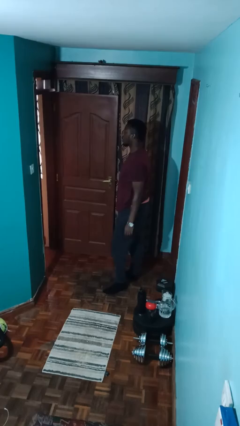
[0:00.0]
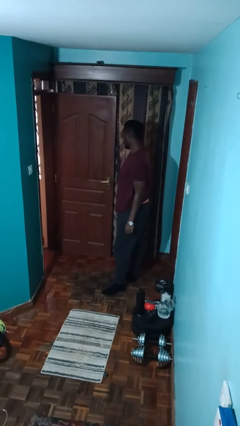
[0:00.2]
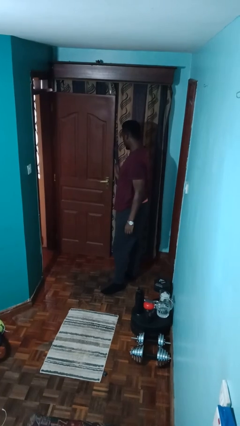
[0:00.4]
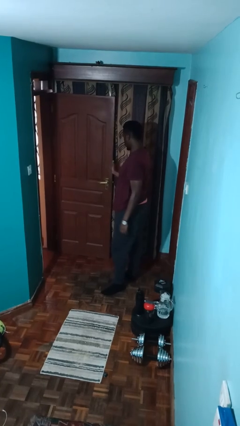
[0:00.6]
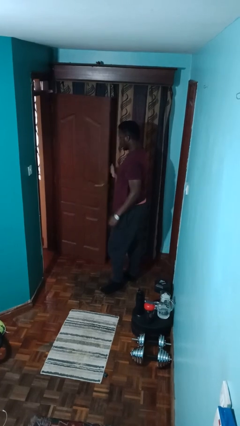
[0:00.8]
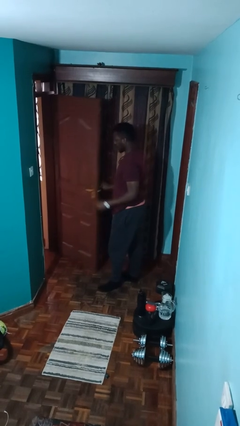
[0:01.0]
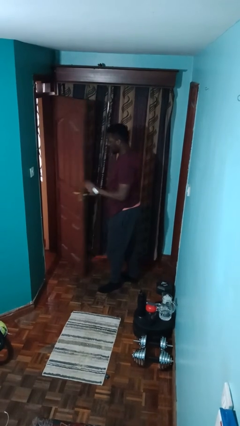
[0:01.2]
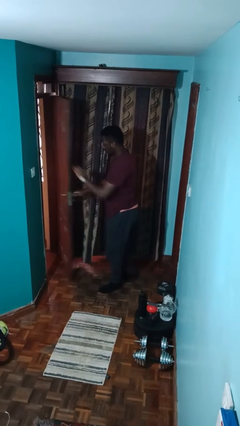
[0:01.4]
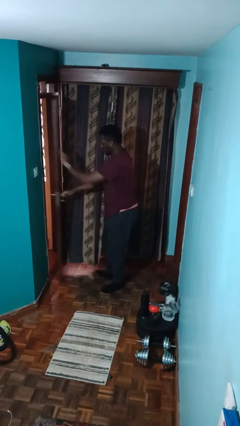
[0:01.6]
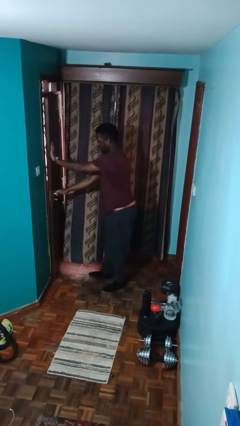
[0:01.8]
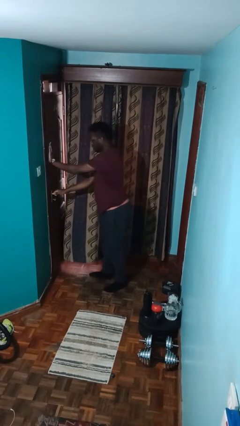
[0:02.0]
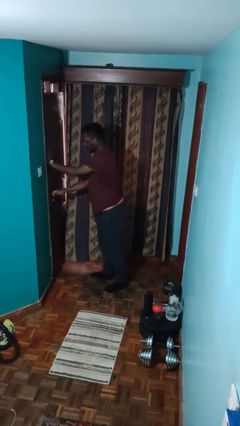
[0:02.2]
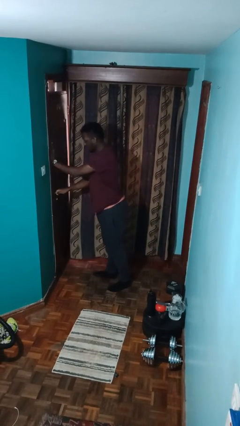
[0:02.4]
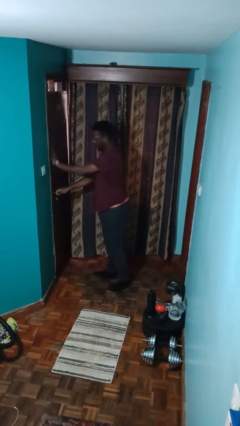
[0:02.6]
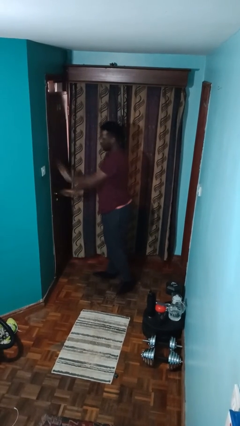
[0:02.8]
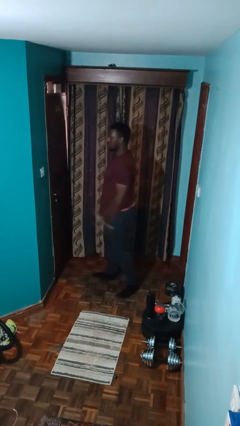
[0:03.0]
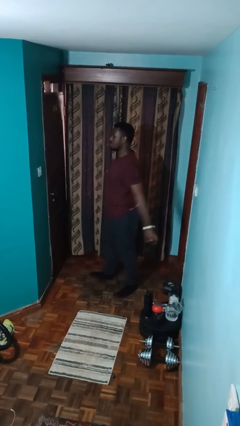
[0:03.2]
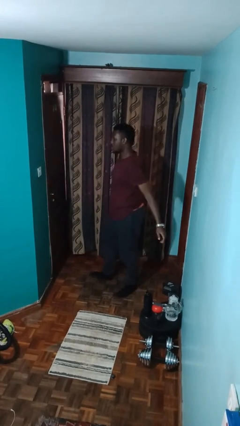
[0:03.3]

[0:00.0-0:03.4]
person closes facility door

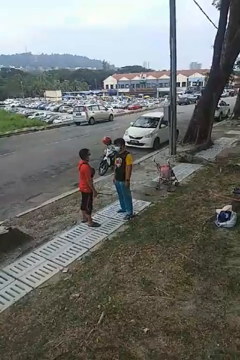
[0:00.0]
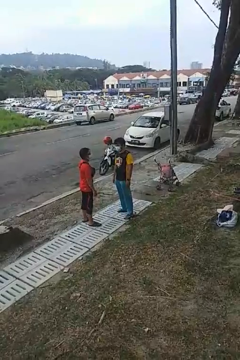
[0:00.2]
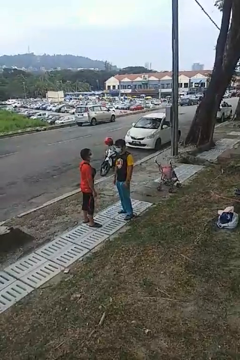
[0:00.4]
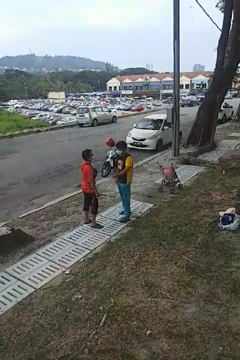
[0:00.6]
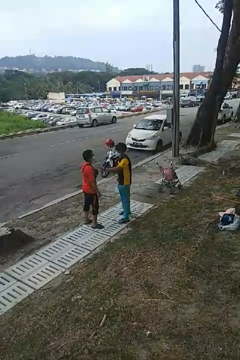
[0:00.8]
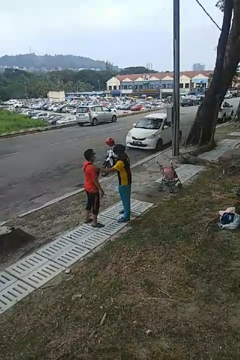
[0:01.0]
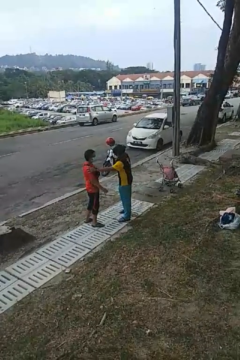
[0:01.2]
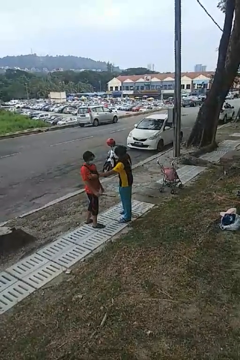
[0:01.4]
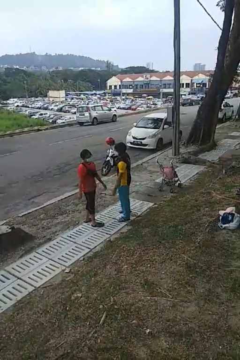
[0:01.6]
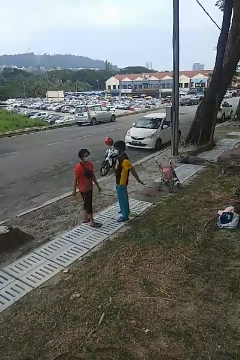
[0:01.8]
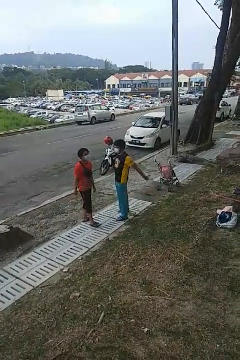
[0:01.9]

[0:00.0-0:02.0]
person shoves person

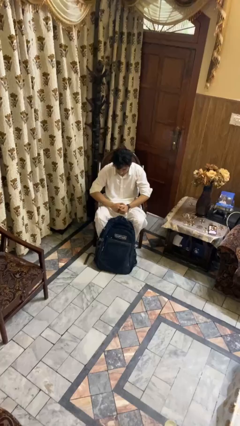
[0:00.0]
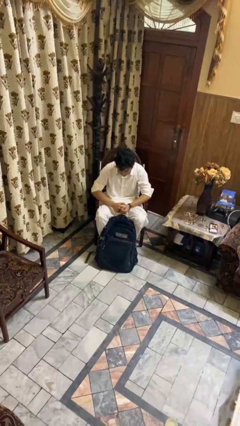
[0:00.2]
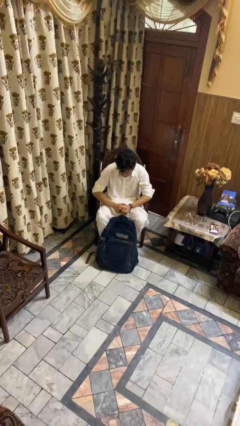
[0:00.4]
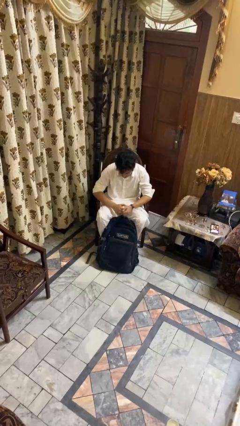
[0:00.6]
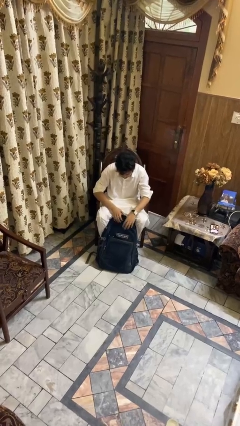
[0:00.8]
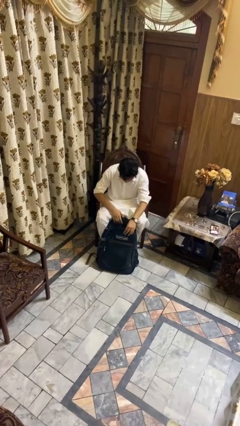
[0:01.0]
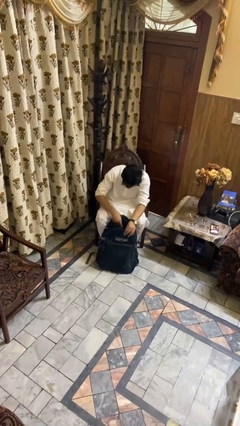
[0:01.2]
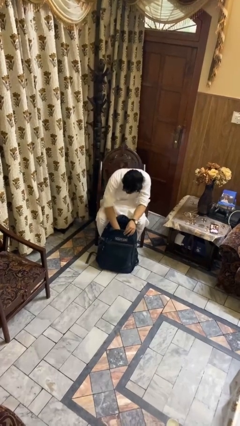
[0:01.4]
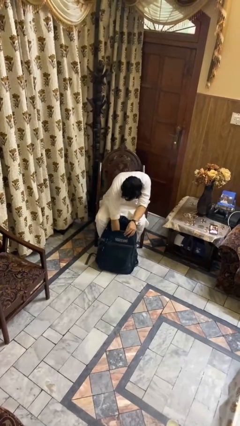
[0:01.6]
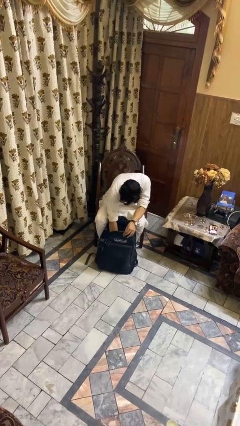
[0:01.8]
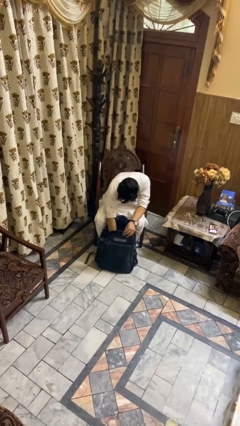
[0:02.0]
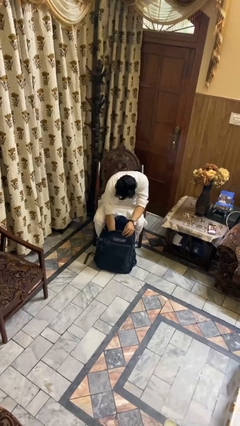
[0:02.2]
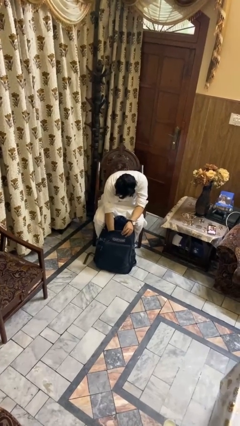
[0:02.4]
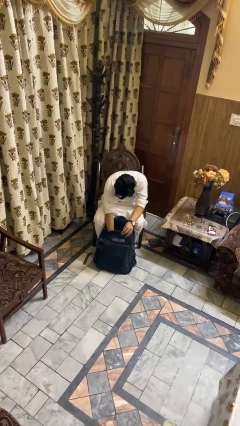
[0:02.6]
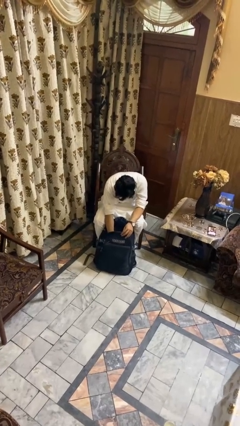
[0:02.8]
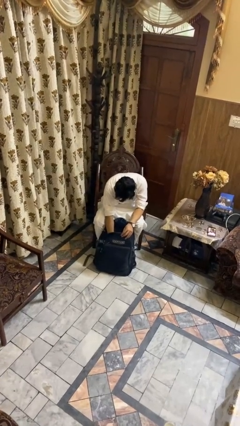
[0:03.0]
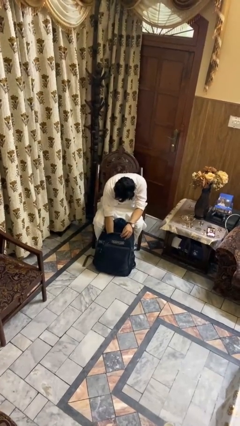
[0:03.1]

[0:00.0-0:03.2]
person searches in backpack

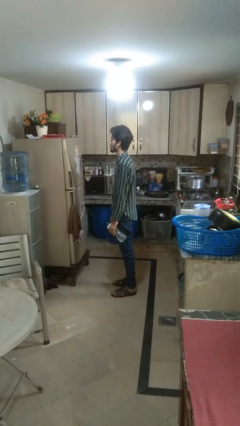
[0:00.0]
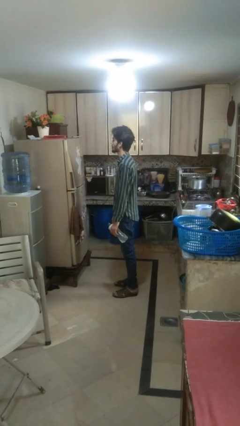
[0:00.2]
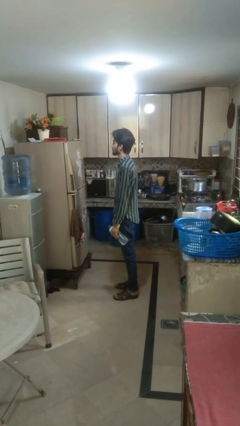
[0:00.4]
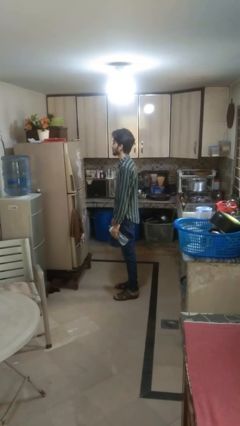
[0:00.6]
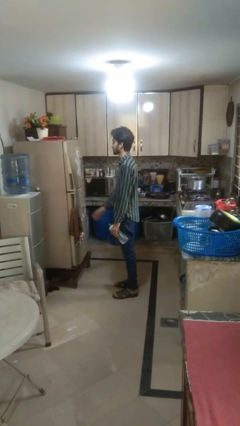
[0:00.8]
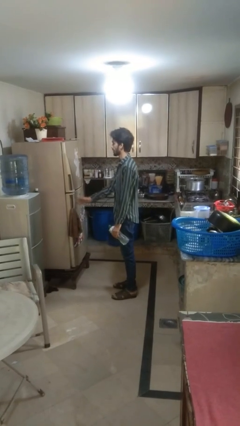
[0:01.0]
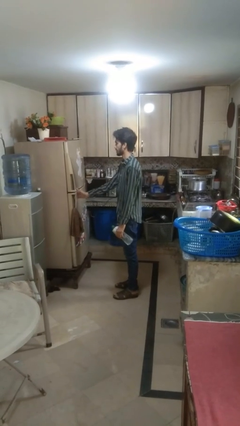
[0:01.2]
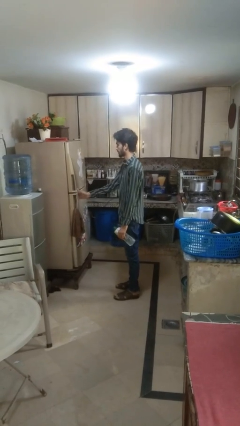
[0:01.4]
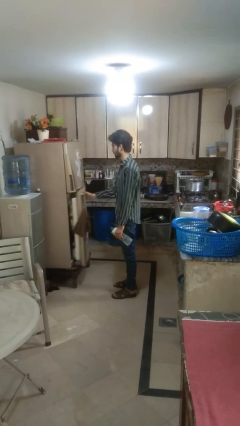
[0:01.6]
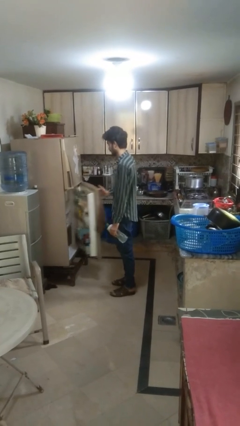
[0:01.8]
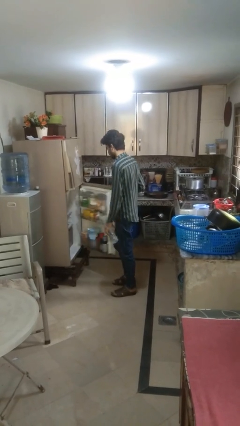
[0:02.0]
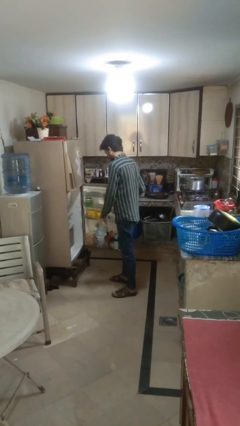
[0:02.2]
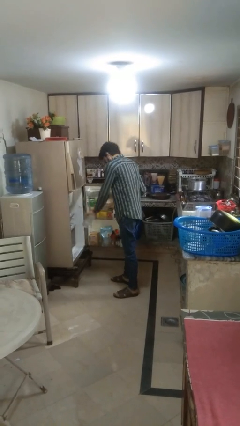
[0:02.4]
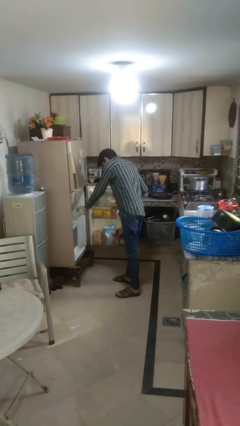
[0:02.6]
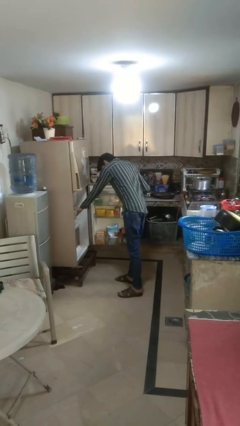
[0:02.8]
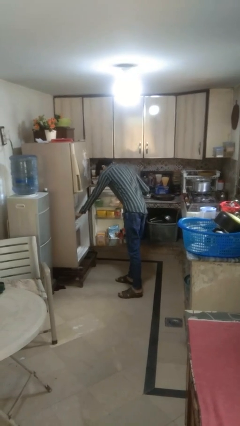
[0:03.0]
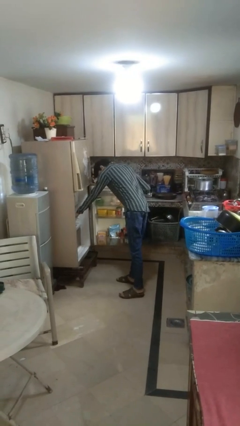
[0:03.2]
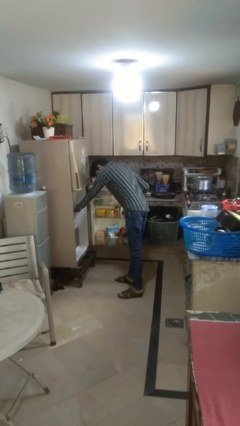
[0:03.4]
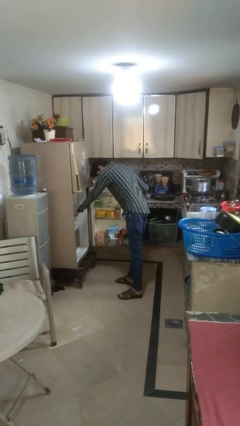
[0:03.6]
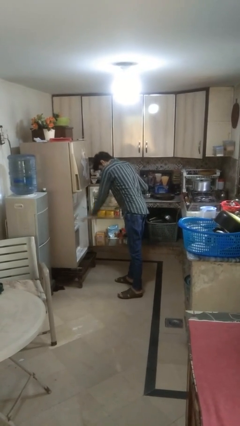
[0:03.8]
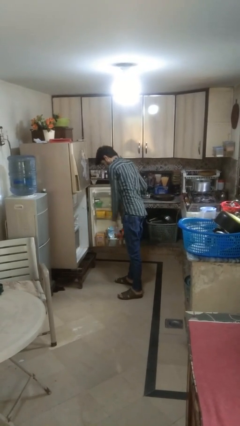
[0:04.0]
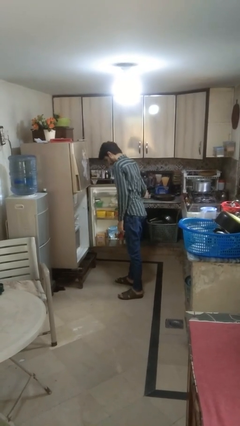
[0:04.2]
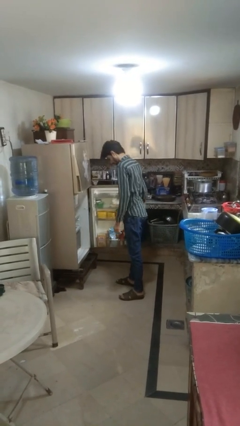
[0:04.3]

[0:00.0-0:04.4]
person puts object into refrigerator

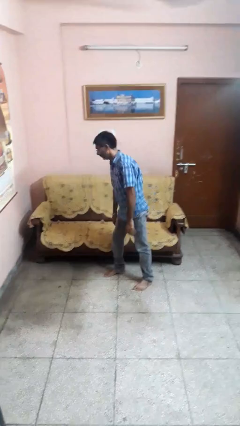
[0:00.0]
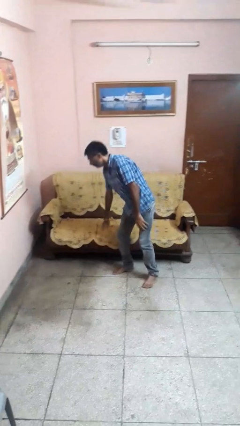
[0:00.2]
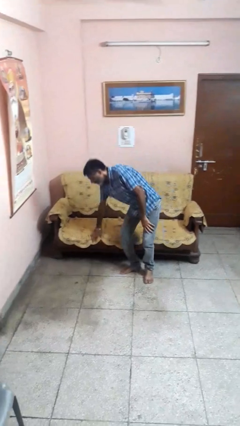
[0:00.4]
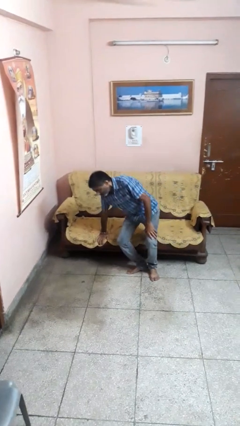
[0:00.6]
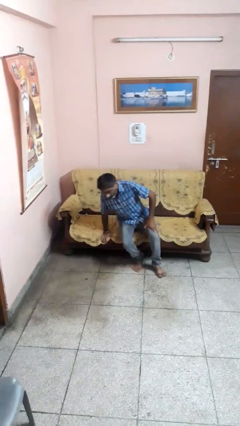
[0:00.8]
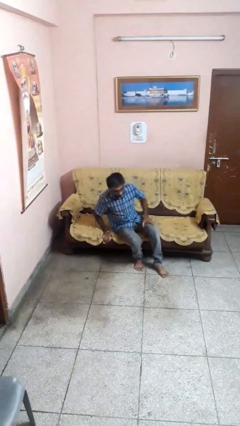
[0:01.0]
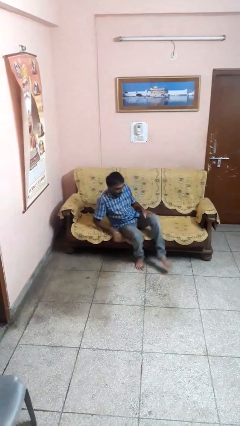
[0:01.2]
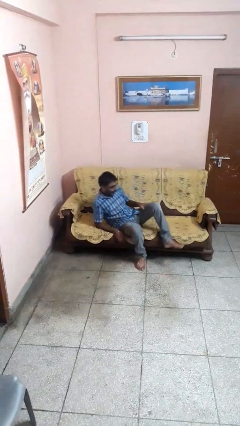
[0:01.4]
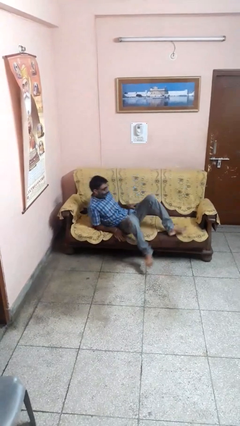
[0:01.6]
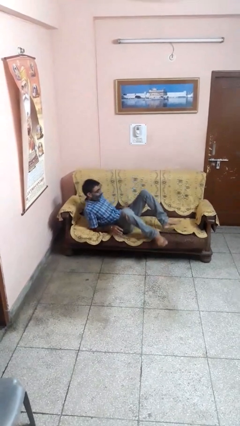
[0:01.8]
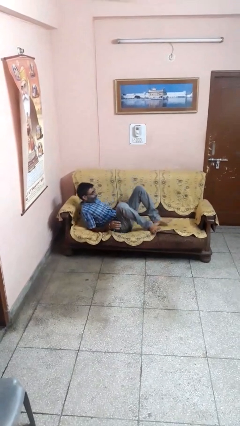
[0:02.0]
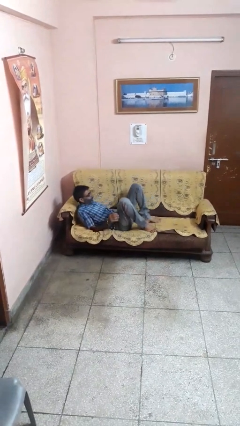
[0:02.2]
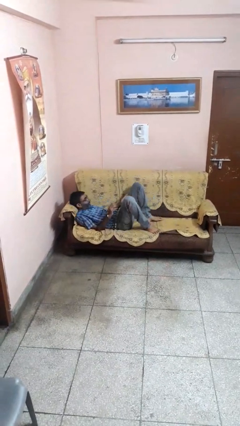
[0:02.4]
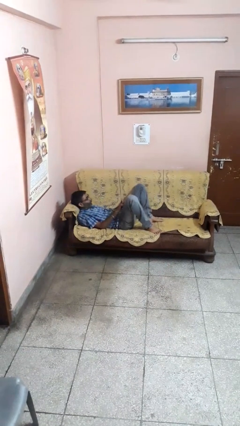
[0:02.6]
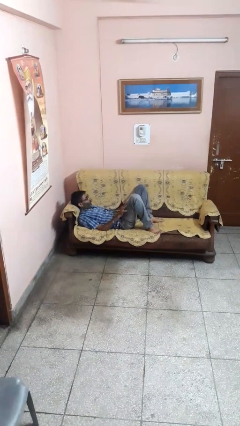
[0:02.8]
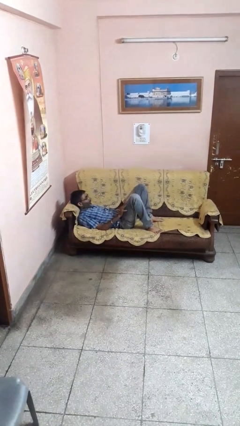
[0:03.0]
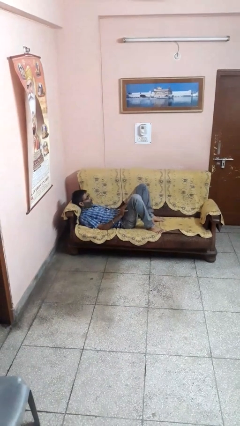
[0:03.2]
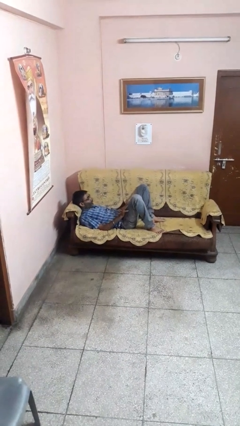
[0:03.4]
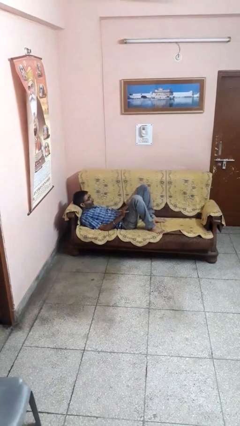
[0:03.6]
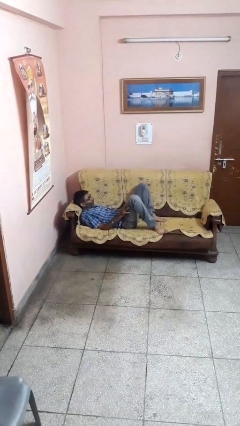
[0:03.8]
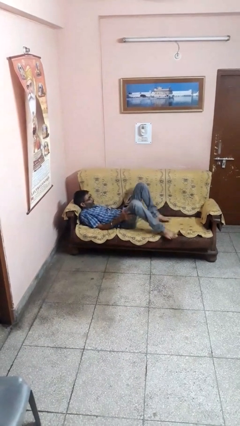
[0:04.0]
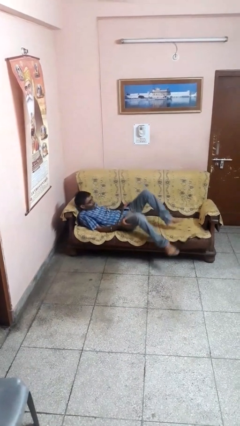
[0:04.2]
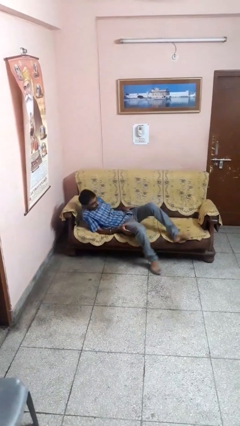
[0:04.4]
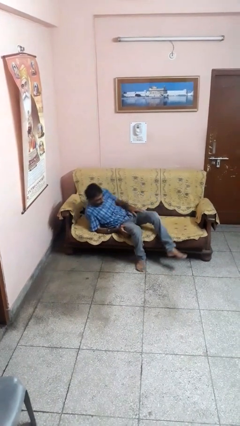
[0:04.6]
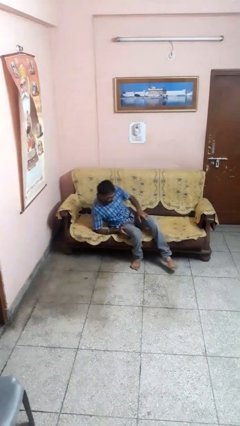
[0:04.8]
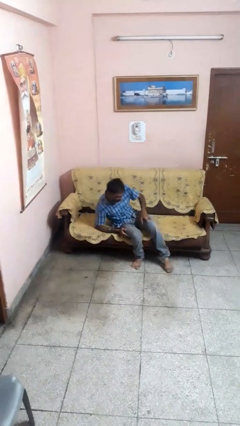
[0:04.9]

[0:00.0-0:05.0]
person lies down on couch

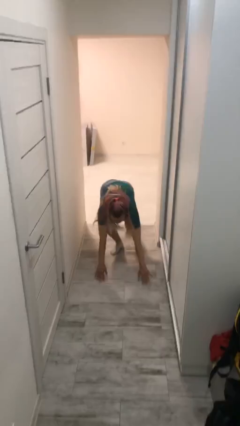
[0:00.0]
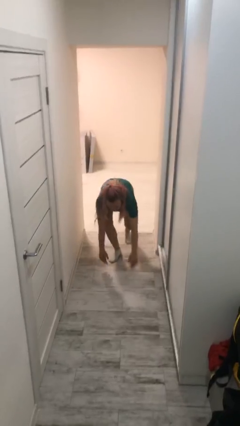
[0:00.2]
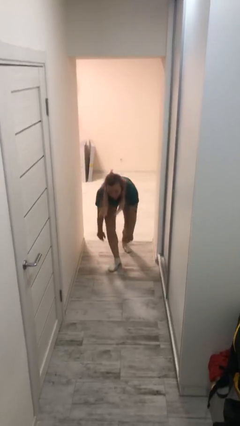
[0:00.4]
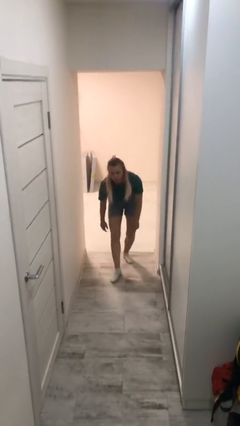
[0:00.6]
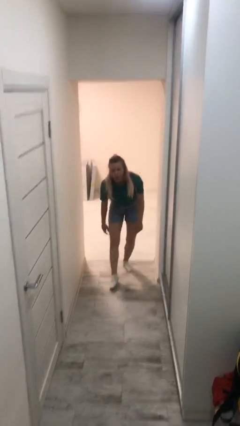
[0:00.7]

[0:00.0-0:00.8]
person stands up from floor
